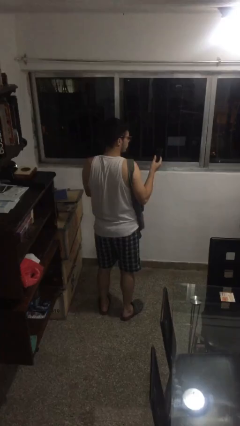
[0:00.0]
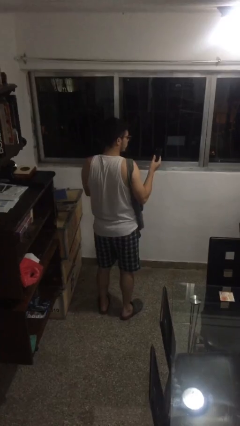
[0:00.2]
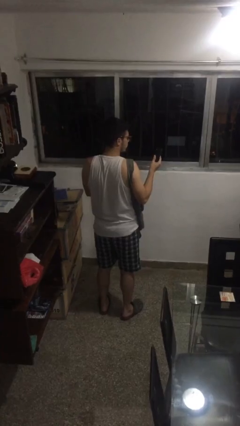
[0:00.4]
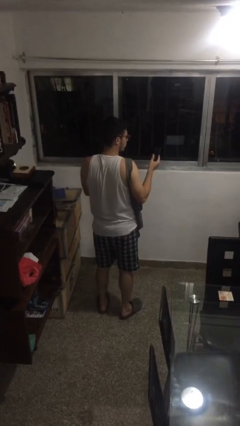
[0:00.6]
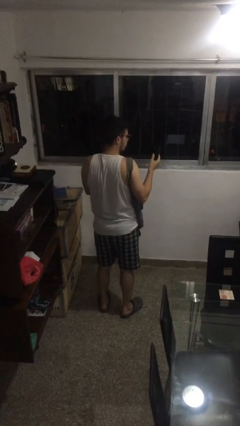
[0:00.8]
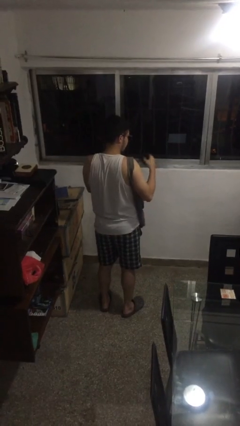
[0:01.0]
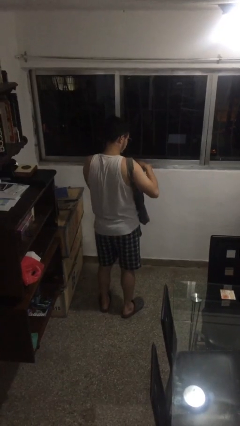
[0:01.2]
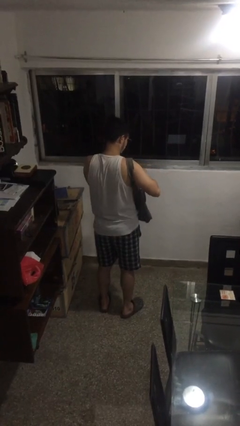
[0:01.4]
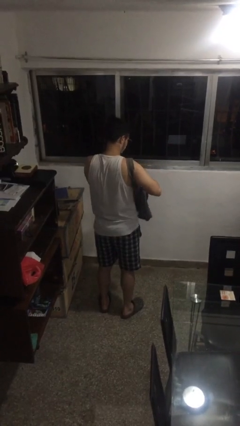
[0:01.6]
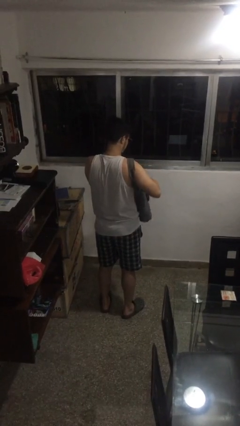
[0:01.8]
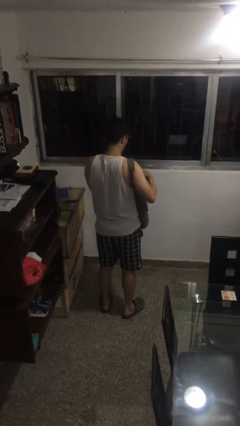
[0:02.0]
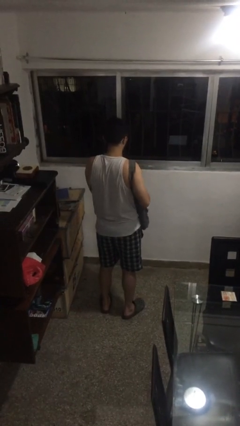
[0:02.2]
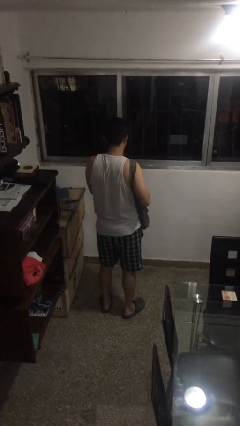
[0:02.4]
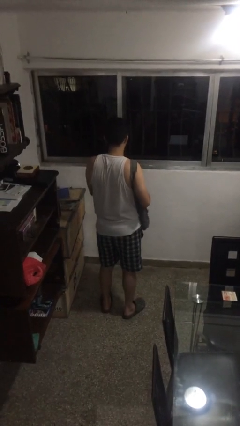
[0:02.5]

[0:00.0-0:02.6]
person puts object into purse

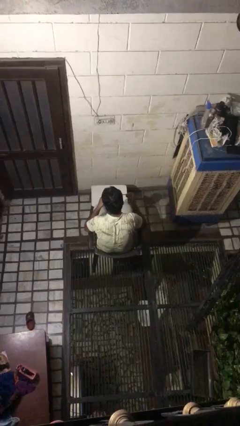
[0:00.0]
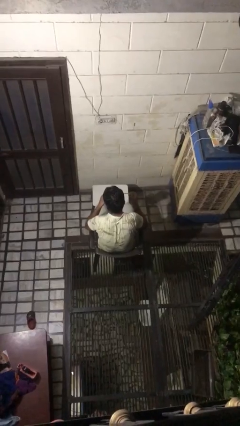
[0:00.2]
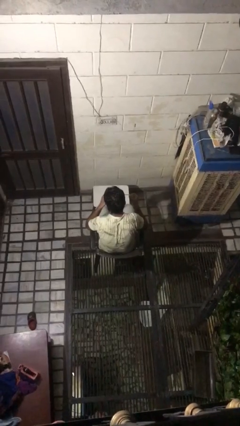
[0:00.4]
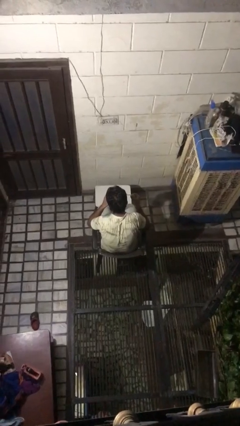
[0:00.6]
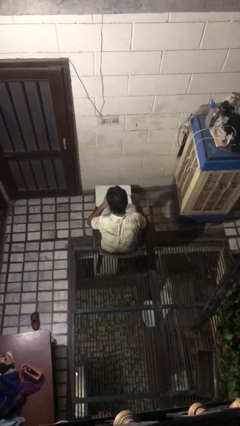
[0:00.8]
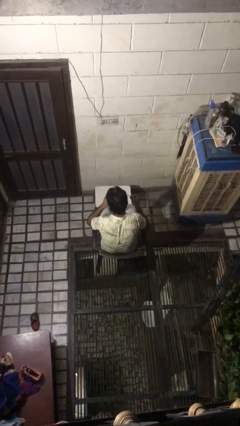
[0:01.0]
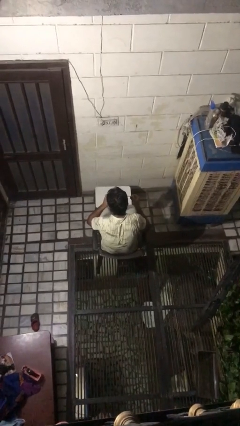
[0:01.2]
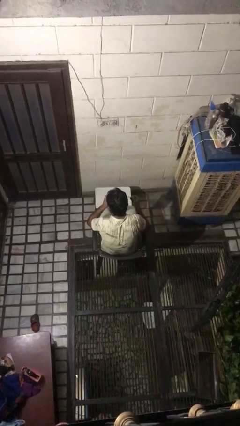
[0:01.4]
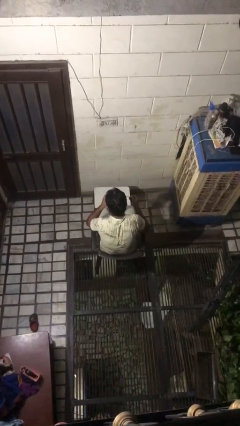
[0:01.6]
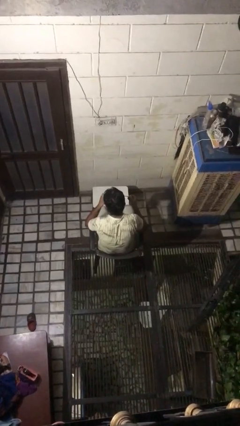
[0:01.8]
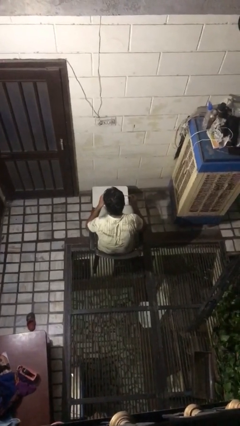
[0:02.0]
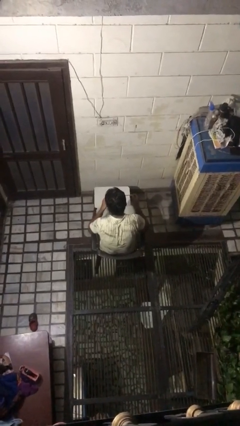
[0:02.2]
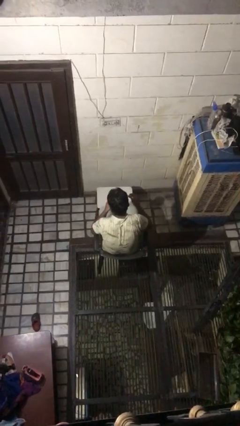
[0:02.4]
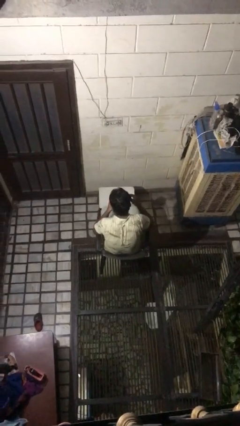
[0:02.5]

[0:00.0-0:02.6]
person drinks from mug

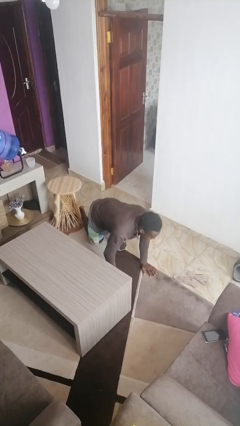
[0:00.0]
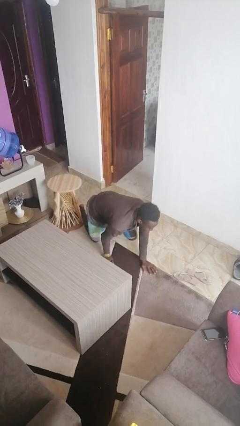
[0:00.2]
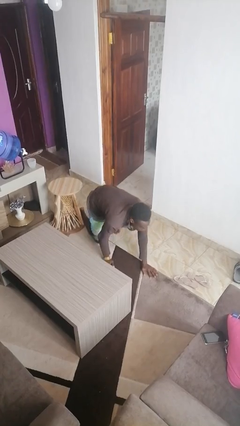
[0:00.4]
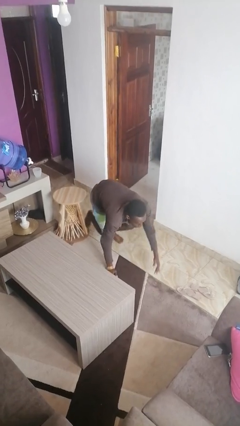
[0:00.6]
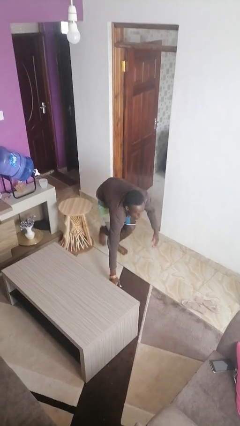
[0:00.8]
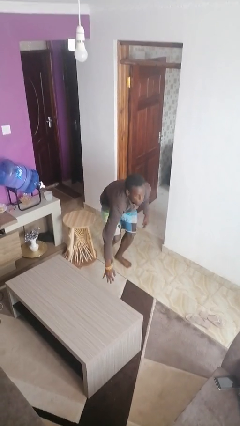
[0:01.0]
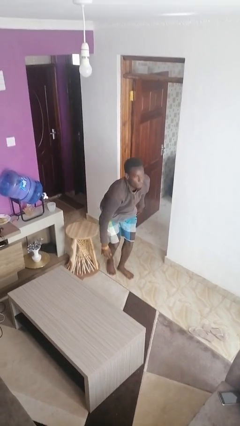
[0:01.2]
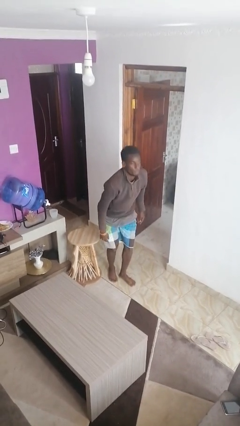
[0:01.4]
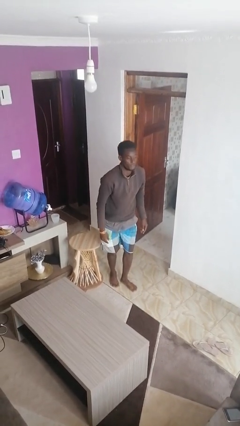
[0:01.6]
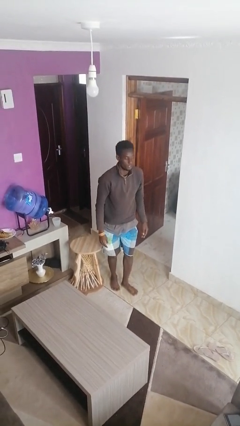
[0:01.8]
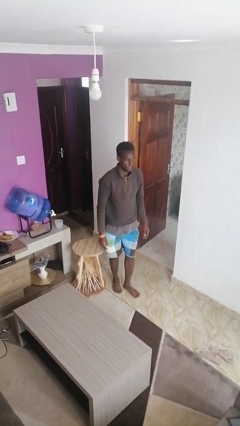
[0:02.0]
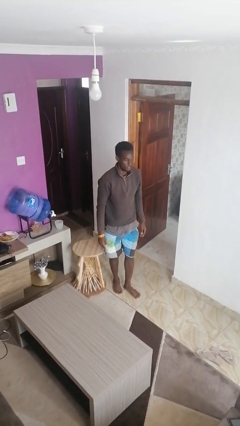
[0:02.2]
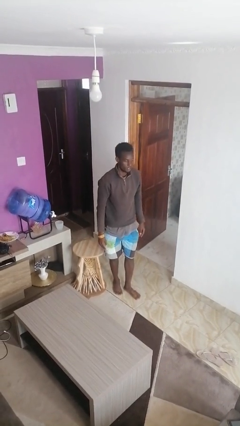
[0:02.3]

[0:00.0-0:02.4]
person stands up from floor

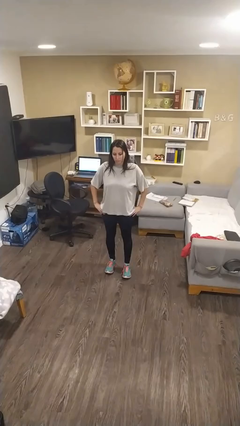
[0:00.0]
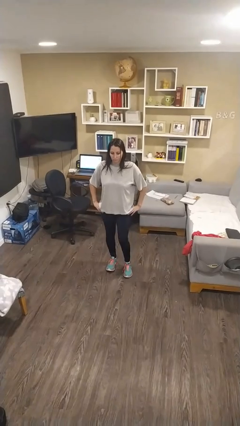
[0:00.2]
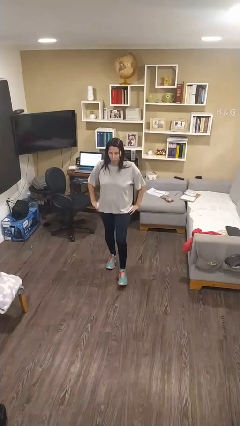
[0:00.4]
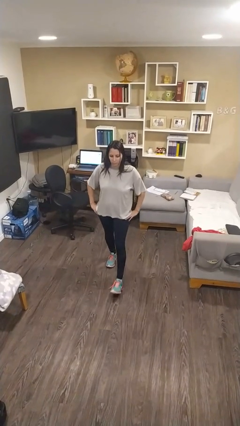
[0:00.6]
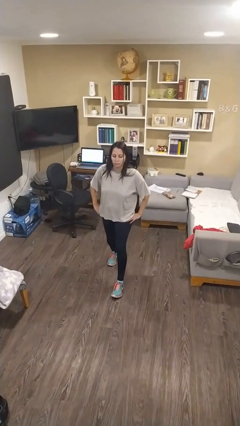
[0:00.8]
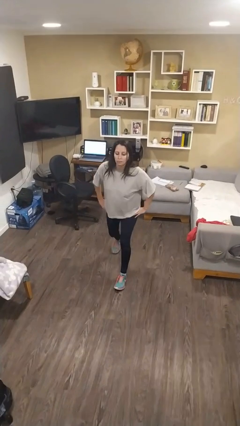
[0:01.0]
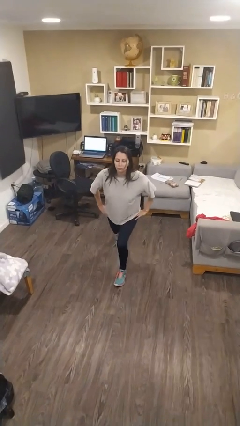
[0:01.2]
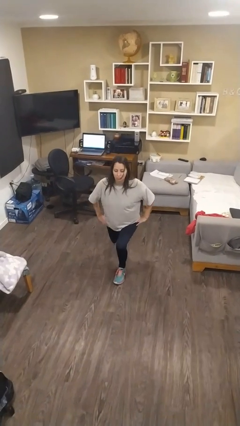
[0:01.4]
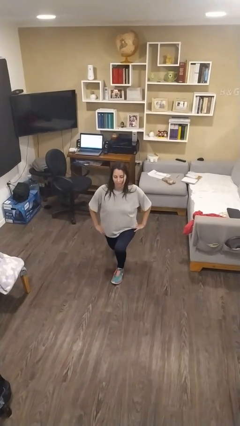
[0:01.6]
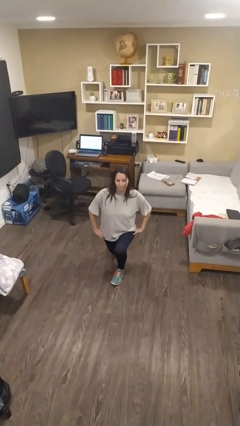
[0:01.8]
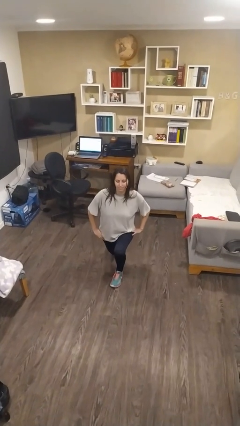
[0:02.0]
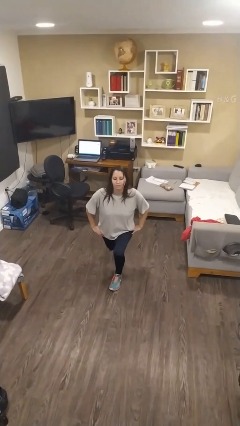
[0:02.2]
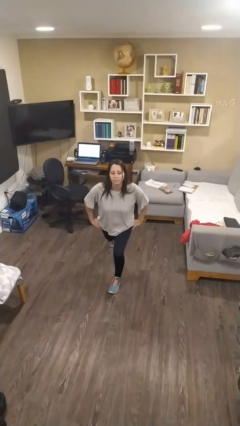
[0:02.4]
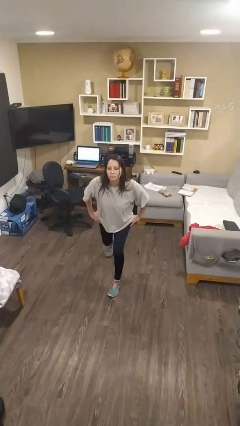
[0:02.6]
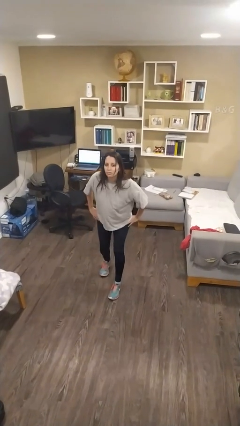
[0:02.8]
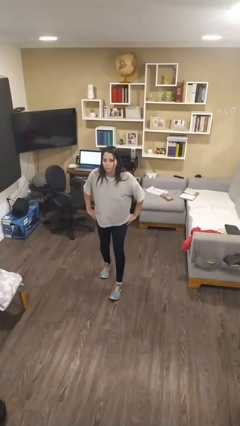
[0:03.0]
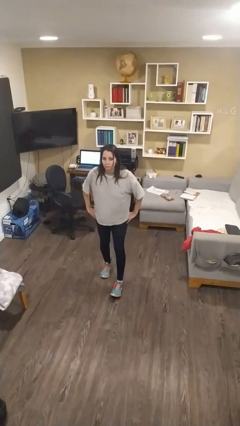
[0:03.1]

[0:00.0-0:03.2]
person exercises with lunges

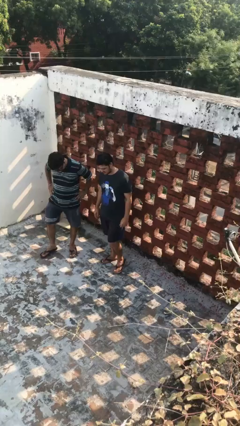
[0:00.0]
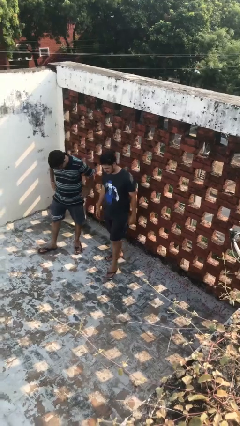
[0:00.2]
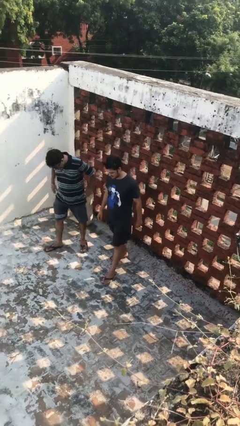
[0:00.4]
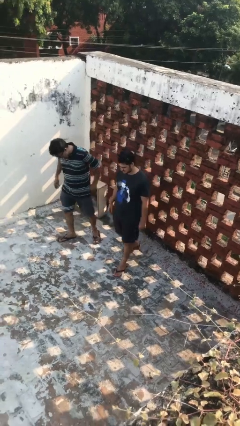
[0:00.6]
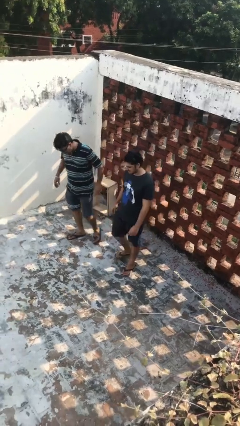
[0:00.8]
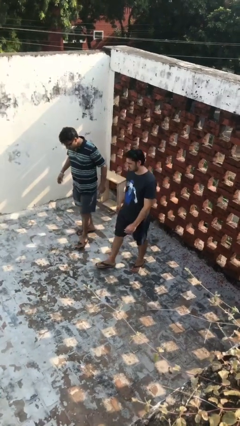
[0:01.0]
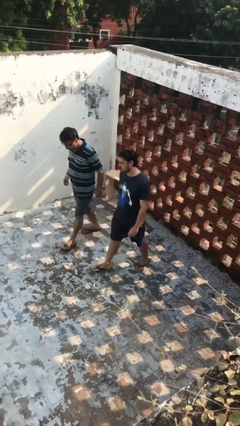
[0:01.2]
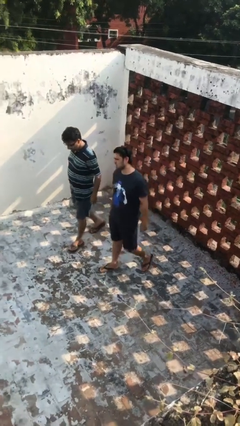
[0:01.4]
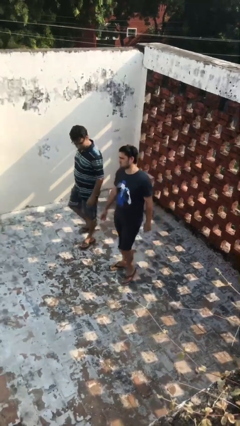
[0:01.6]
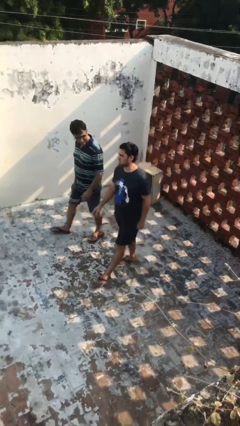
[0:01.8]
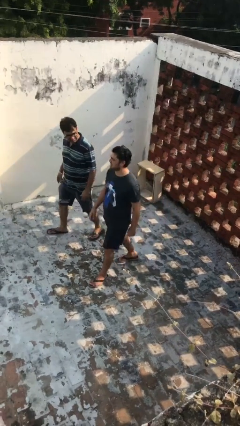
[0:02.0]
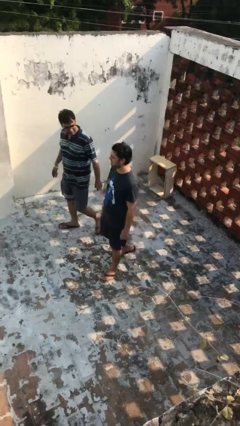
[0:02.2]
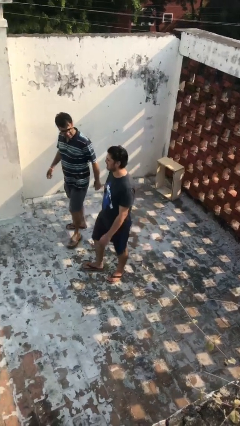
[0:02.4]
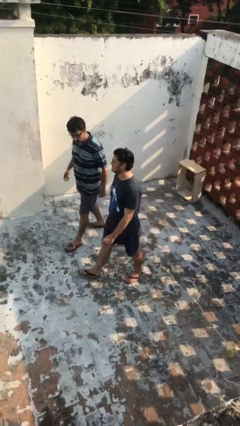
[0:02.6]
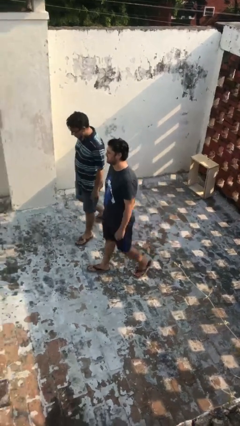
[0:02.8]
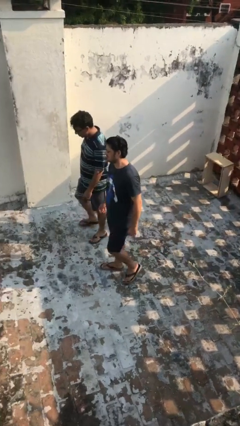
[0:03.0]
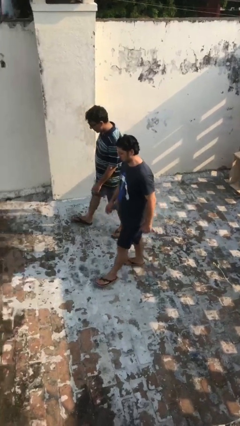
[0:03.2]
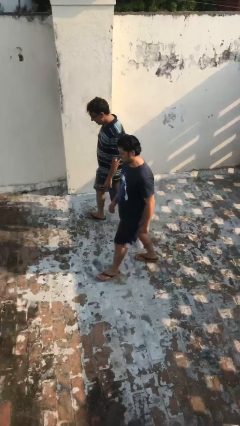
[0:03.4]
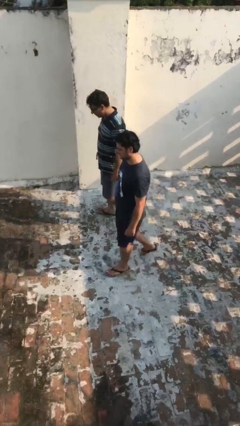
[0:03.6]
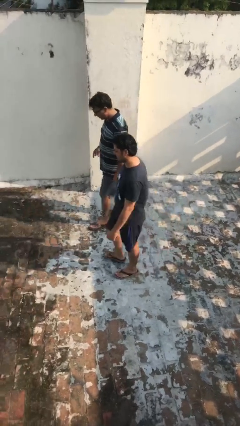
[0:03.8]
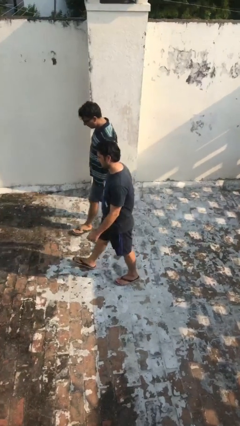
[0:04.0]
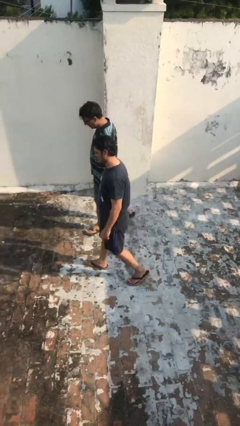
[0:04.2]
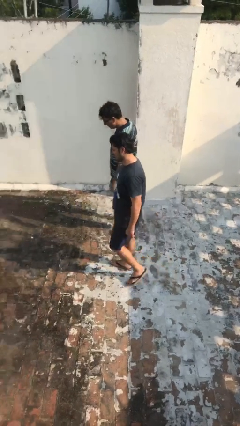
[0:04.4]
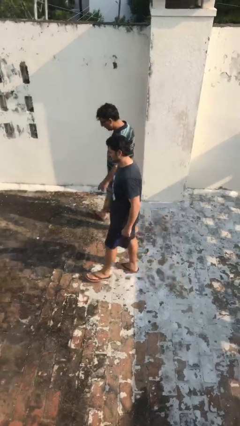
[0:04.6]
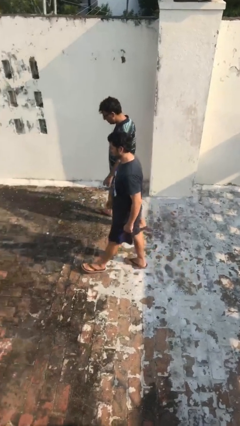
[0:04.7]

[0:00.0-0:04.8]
person talks to person

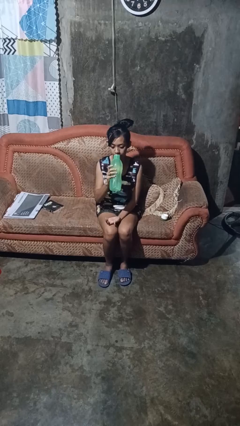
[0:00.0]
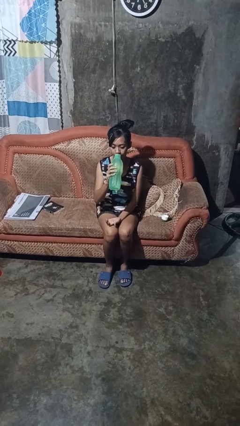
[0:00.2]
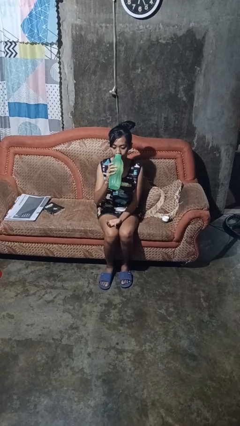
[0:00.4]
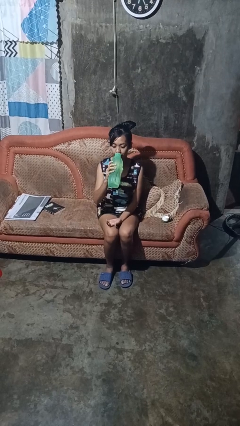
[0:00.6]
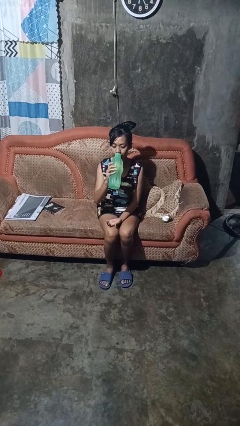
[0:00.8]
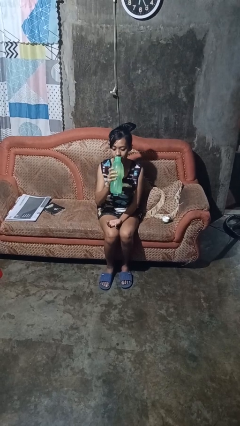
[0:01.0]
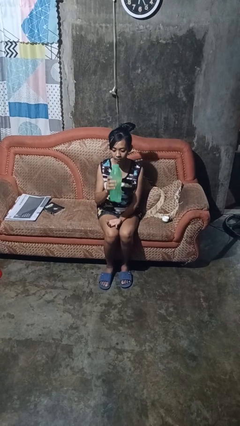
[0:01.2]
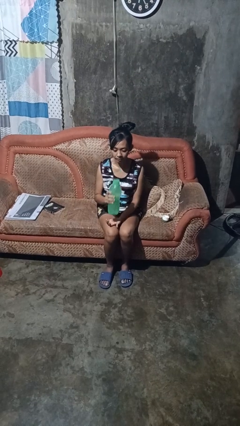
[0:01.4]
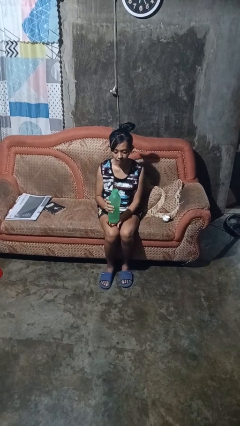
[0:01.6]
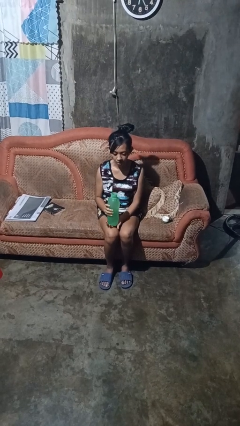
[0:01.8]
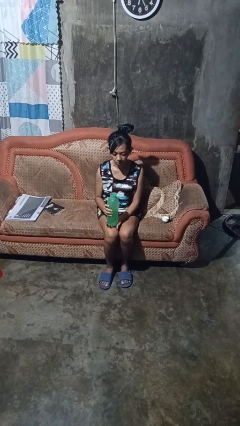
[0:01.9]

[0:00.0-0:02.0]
person drinks from bottle
